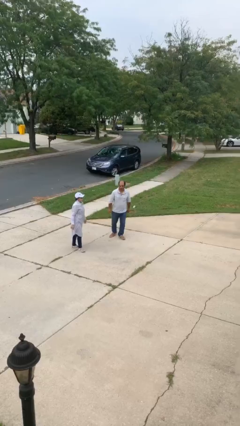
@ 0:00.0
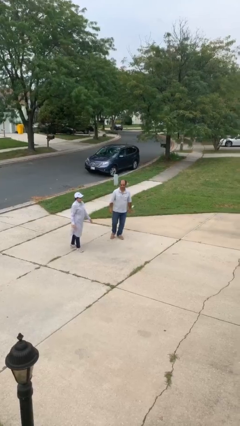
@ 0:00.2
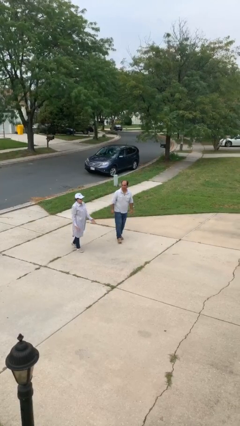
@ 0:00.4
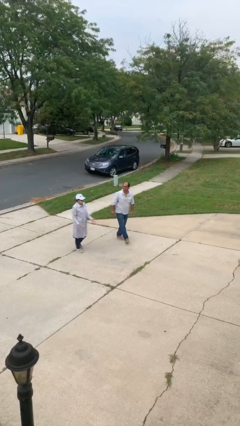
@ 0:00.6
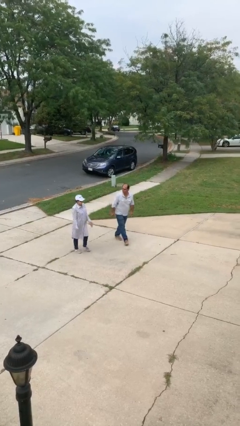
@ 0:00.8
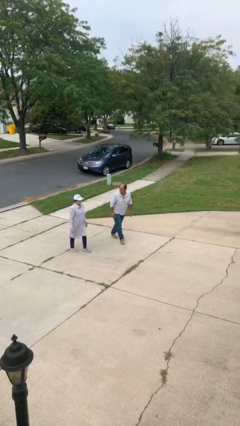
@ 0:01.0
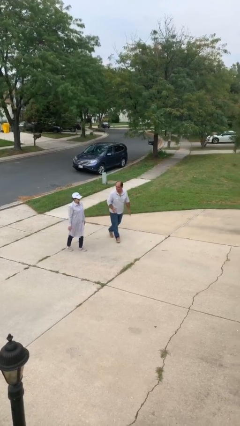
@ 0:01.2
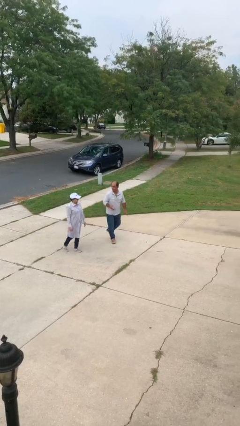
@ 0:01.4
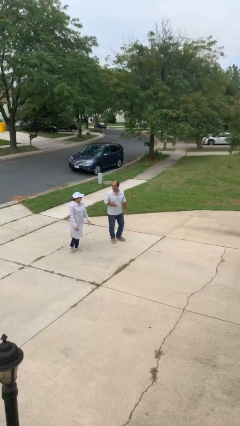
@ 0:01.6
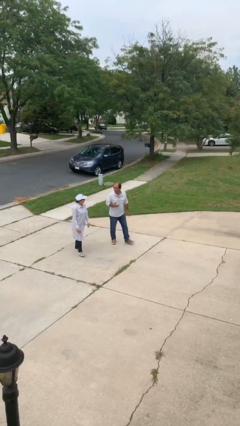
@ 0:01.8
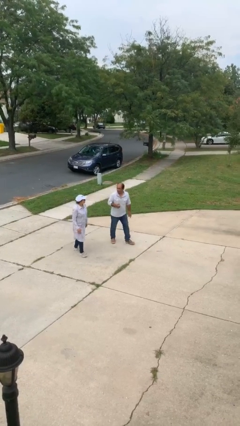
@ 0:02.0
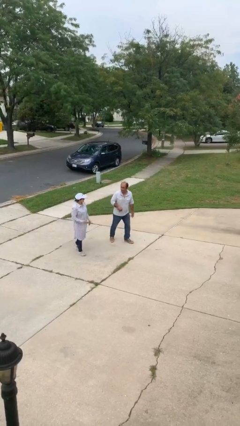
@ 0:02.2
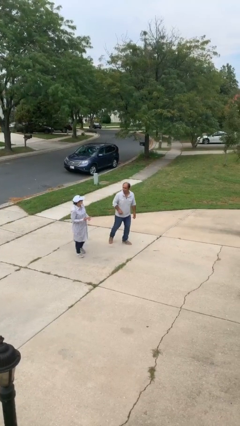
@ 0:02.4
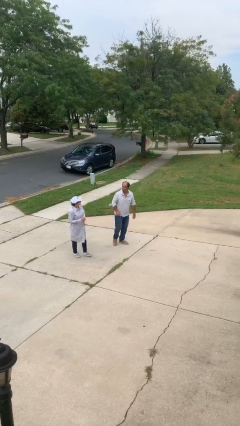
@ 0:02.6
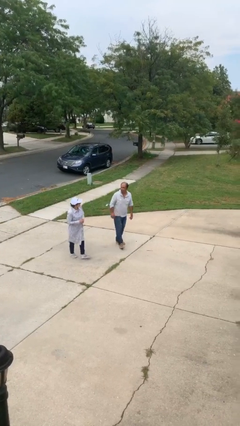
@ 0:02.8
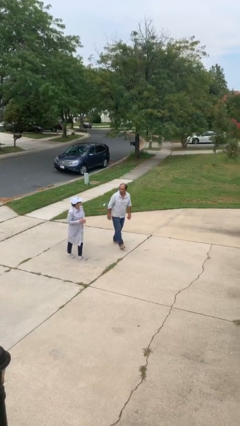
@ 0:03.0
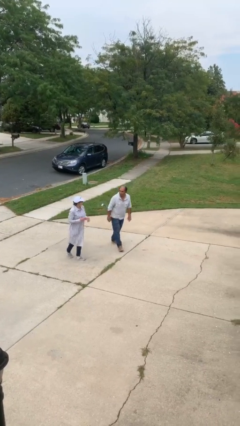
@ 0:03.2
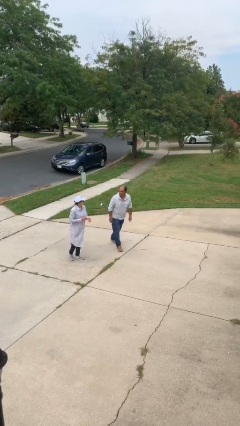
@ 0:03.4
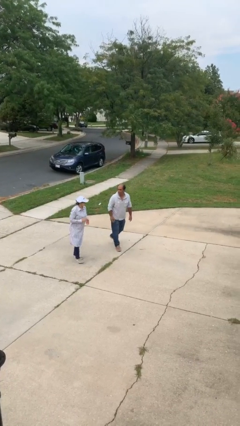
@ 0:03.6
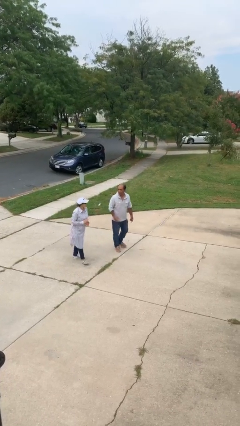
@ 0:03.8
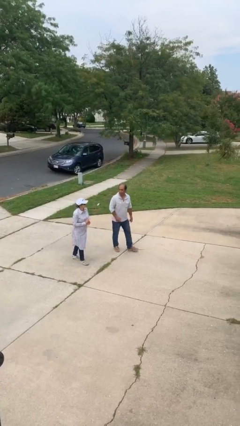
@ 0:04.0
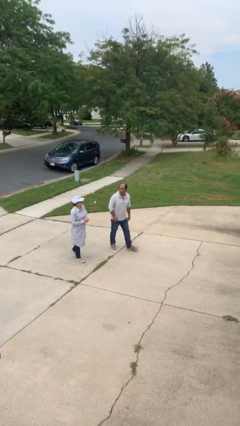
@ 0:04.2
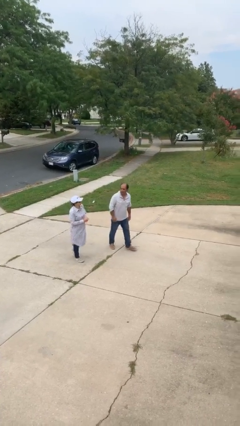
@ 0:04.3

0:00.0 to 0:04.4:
person talks to person

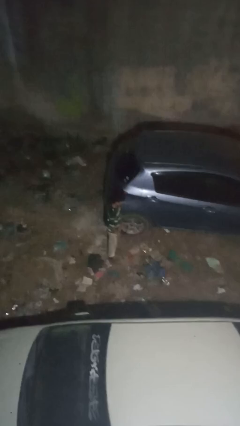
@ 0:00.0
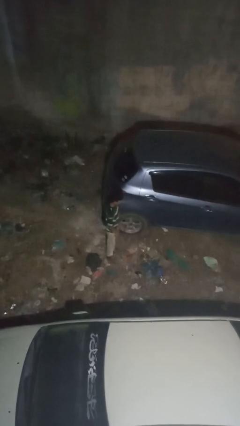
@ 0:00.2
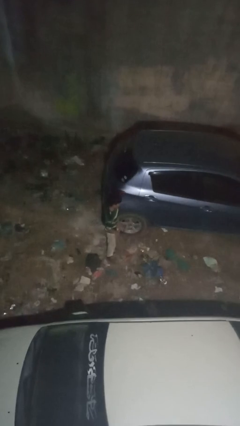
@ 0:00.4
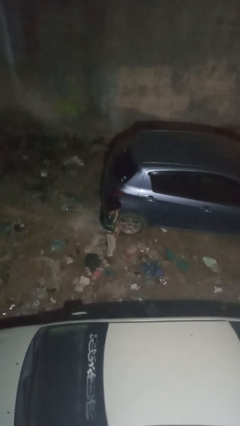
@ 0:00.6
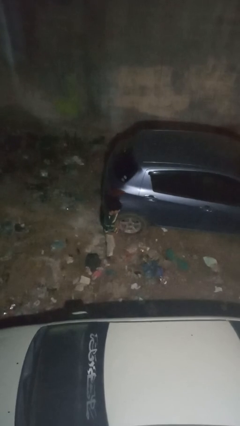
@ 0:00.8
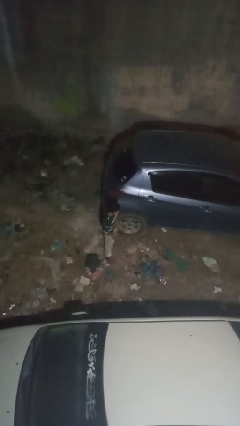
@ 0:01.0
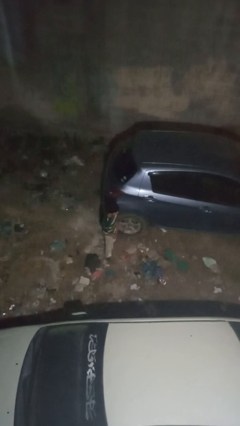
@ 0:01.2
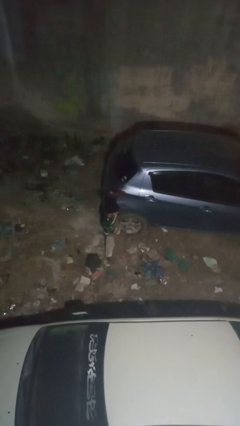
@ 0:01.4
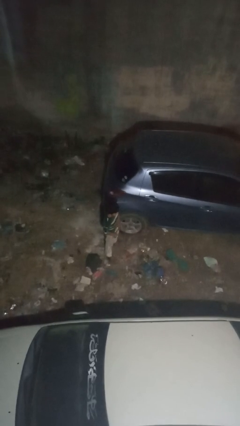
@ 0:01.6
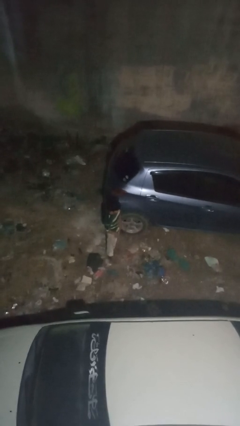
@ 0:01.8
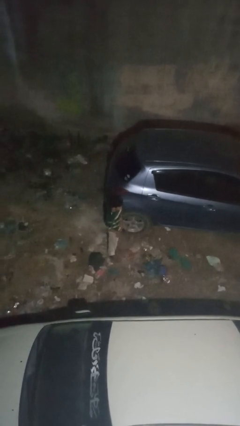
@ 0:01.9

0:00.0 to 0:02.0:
person kicks car tires

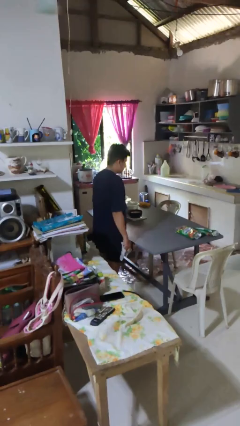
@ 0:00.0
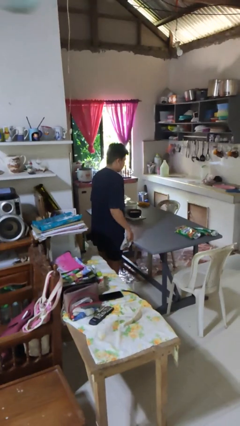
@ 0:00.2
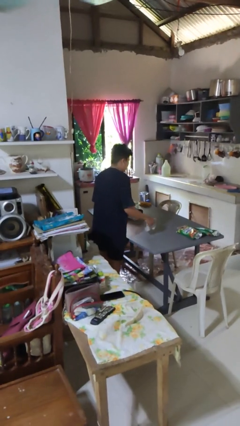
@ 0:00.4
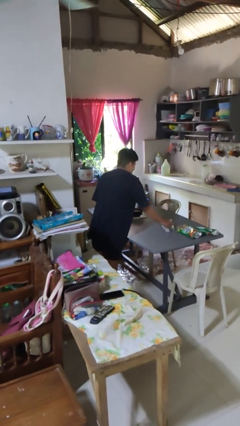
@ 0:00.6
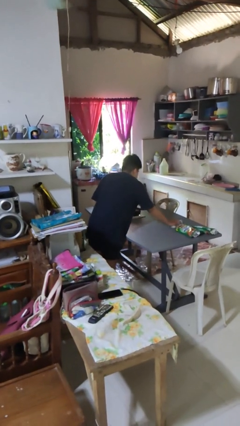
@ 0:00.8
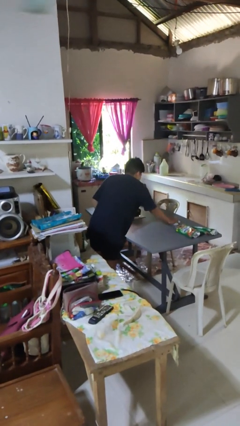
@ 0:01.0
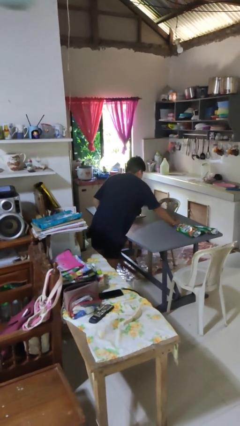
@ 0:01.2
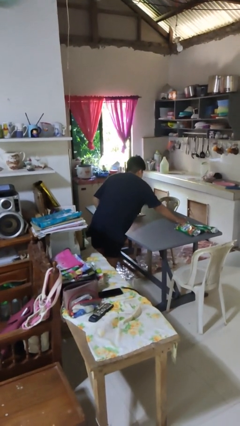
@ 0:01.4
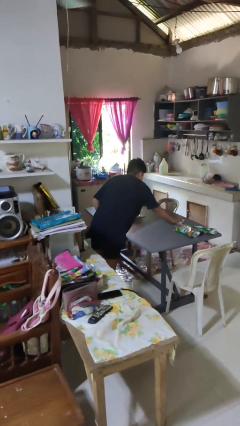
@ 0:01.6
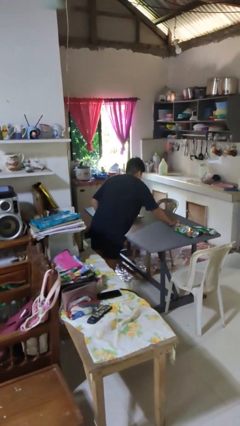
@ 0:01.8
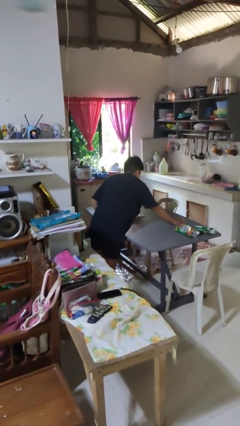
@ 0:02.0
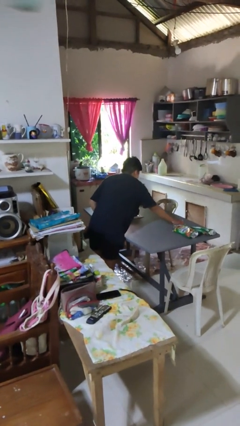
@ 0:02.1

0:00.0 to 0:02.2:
person cleans table with rag

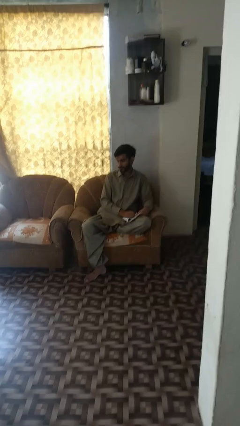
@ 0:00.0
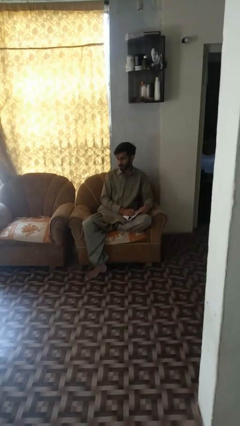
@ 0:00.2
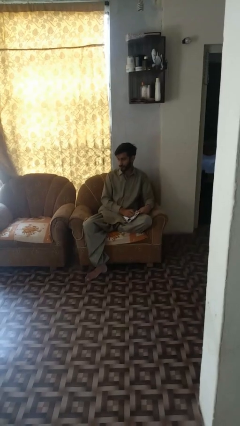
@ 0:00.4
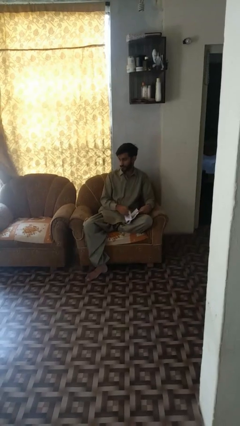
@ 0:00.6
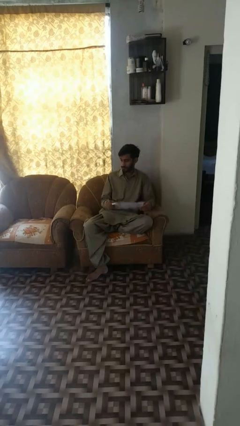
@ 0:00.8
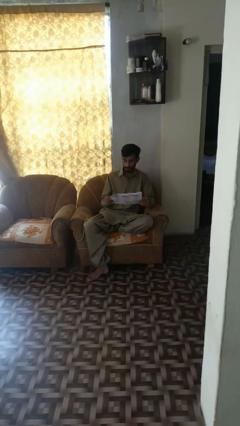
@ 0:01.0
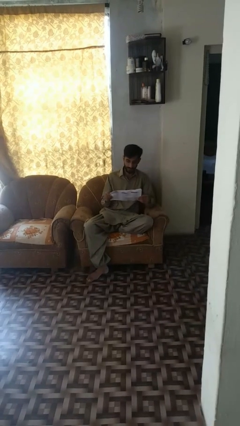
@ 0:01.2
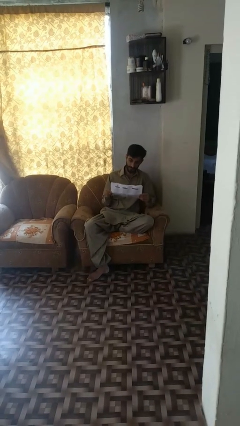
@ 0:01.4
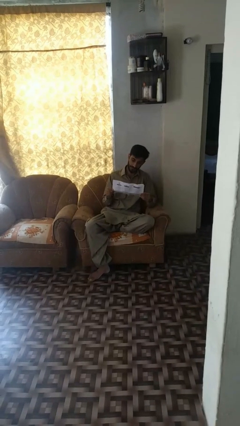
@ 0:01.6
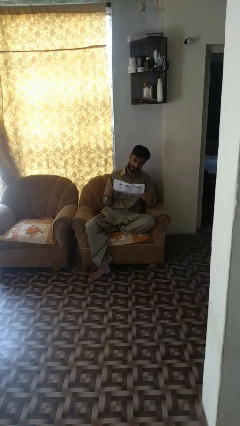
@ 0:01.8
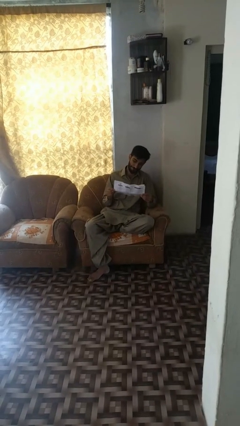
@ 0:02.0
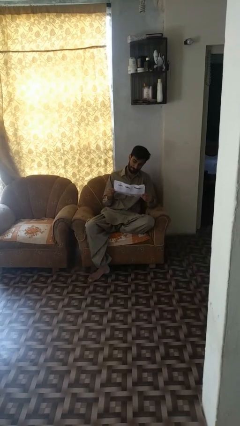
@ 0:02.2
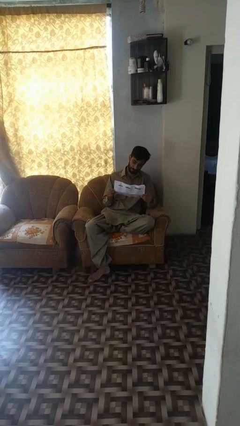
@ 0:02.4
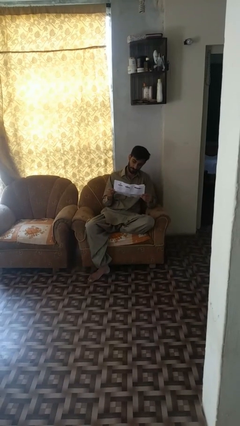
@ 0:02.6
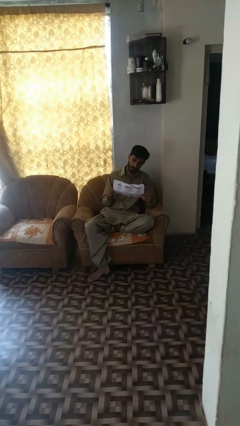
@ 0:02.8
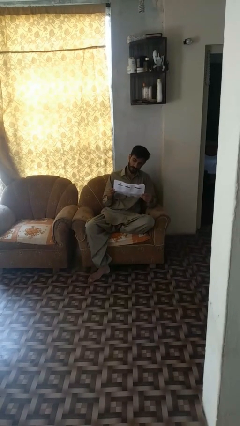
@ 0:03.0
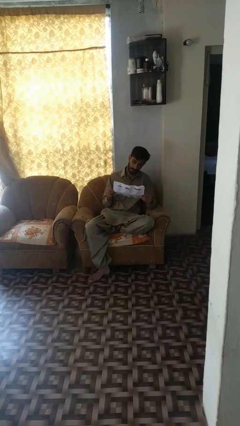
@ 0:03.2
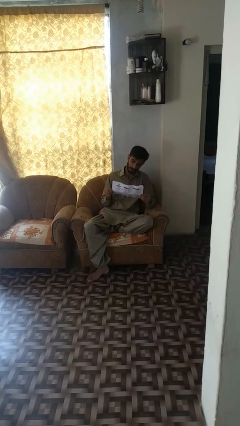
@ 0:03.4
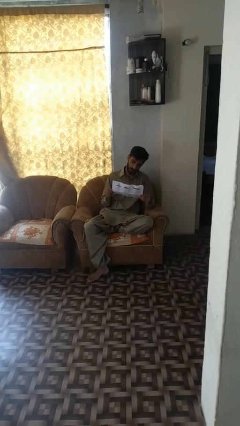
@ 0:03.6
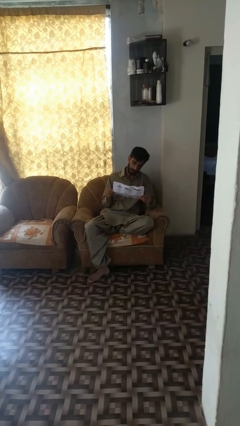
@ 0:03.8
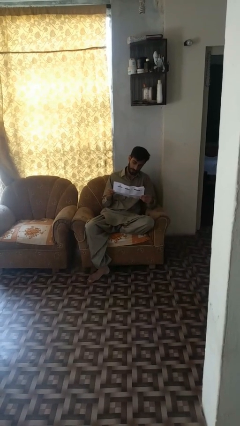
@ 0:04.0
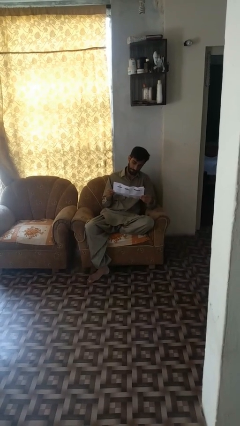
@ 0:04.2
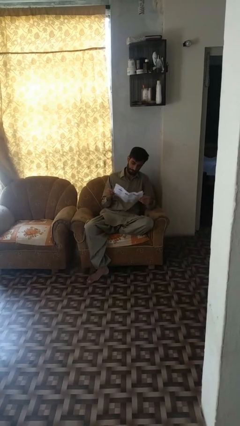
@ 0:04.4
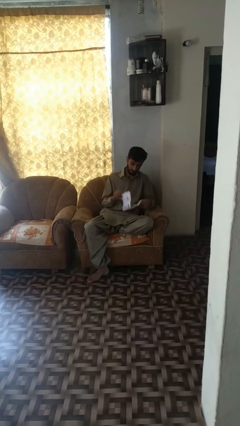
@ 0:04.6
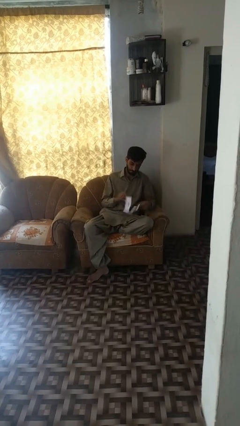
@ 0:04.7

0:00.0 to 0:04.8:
person reads newspaper

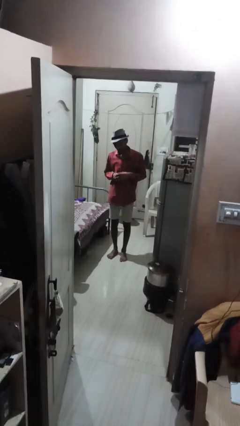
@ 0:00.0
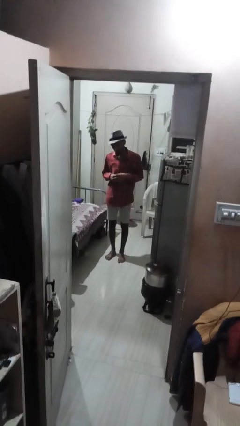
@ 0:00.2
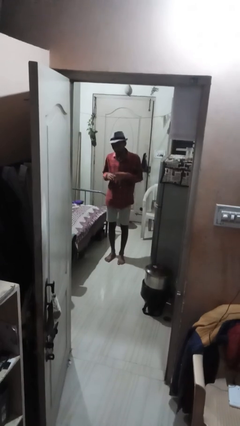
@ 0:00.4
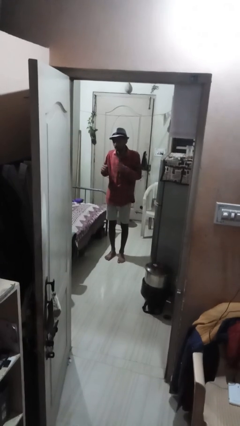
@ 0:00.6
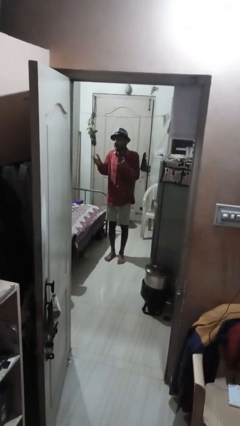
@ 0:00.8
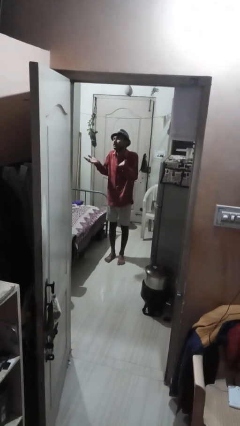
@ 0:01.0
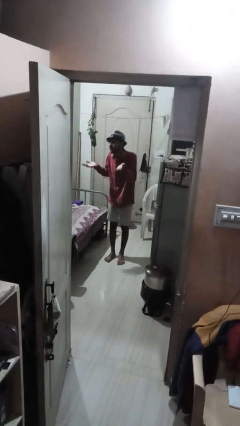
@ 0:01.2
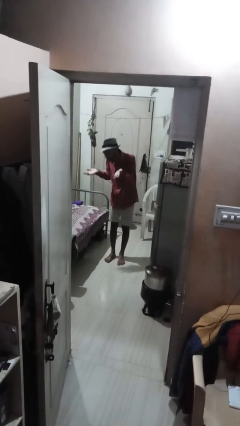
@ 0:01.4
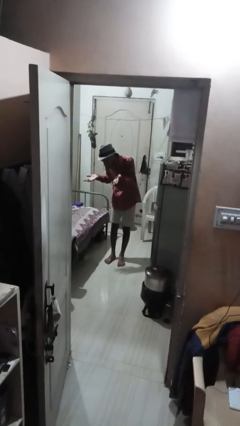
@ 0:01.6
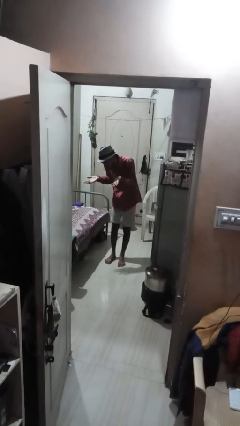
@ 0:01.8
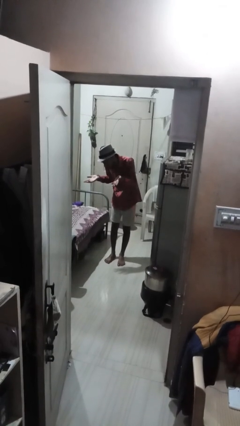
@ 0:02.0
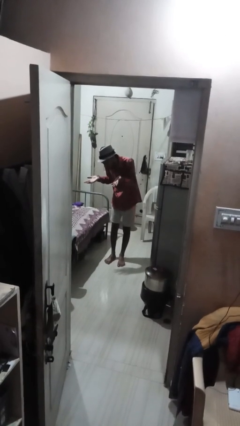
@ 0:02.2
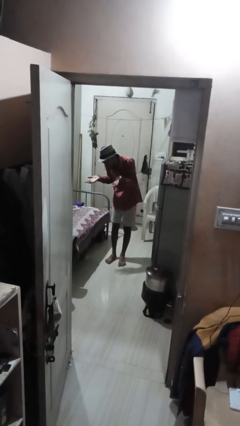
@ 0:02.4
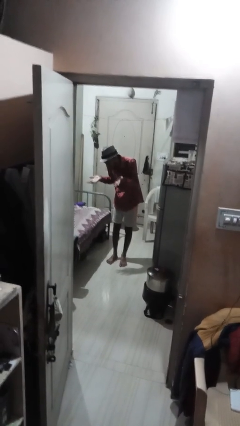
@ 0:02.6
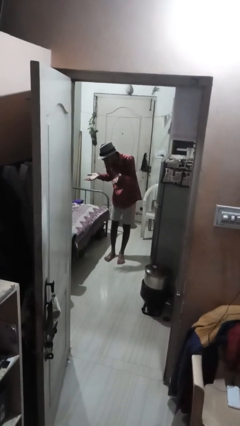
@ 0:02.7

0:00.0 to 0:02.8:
person shrugs

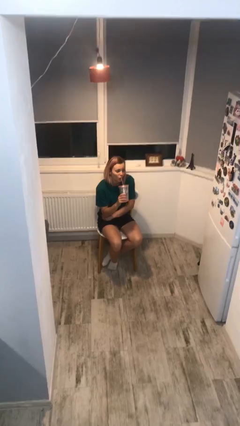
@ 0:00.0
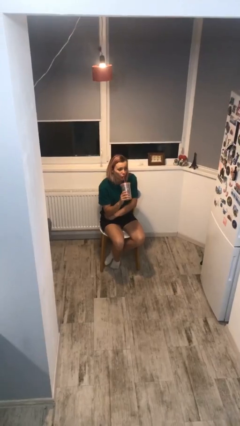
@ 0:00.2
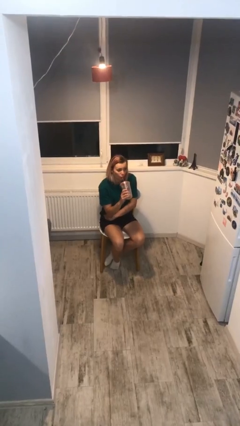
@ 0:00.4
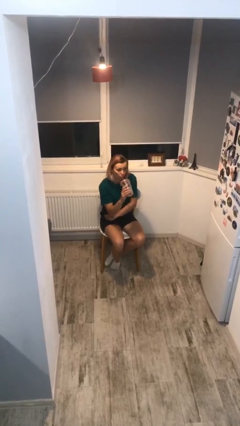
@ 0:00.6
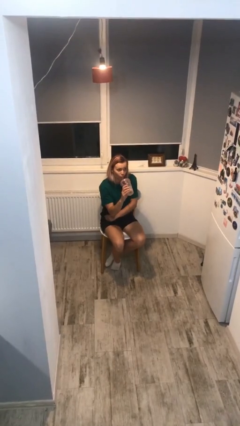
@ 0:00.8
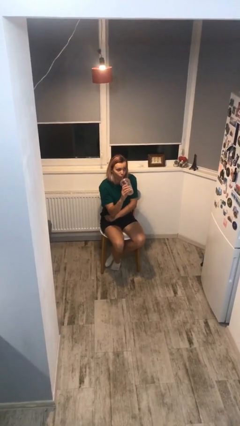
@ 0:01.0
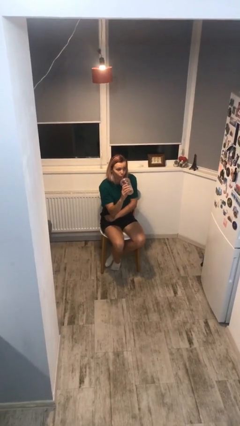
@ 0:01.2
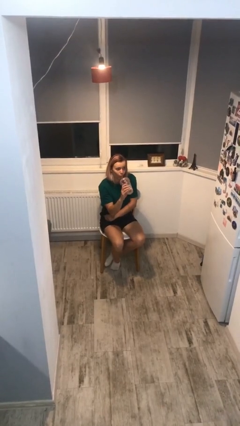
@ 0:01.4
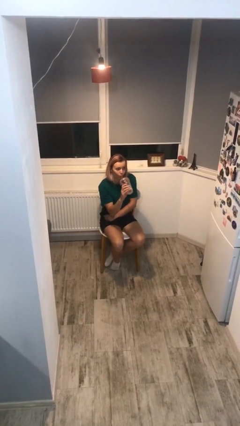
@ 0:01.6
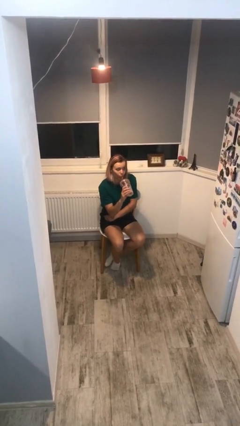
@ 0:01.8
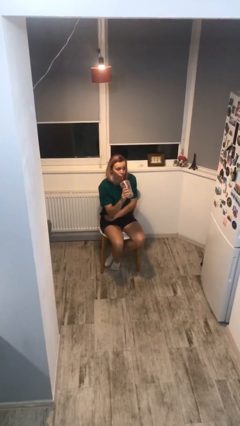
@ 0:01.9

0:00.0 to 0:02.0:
person drinks from straw
